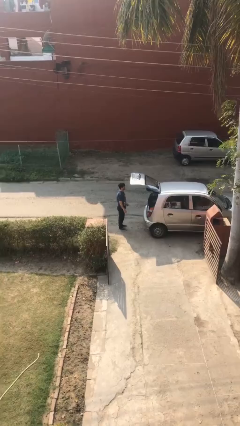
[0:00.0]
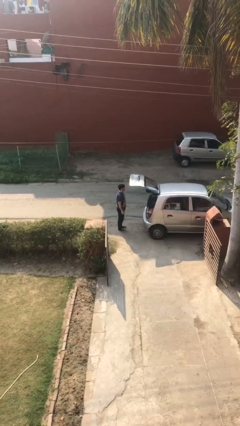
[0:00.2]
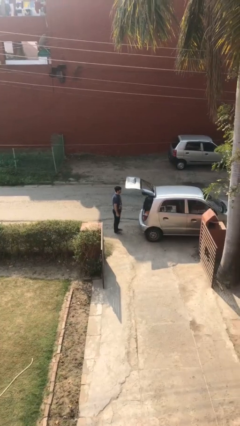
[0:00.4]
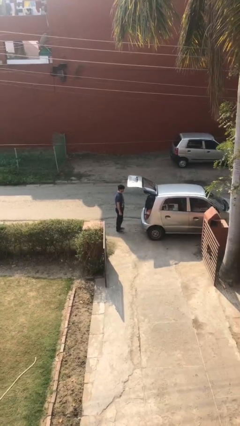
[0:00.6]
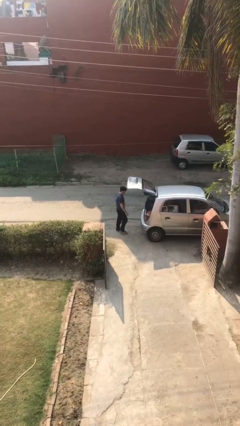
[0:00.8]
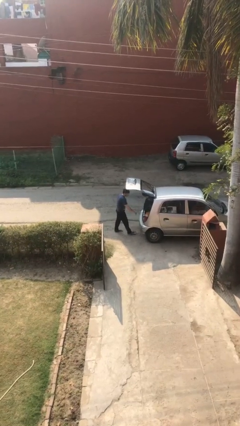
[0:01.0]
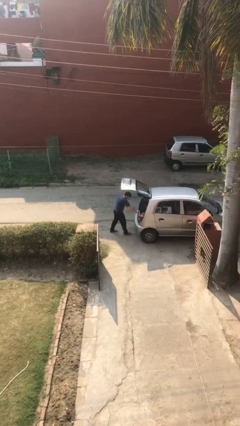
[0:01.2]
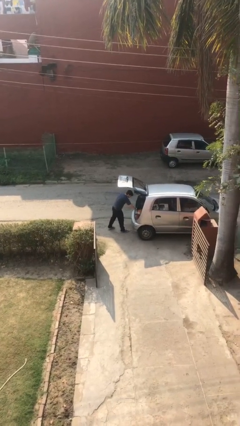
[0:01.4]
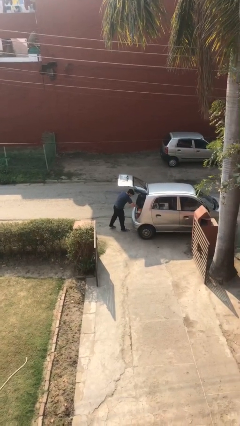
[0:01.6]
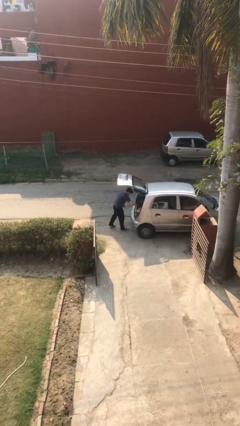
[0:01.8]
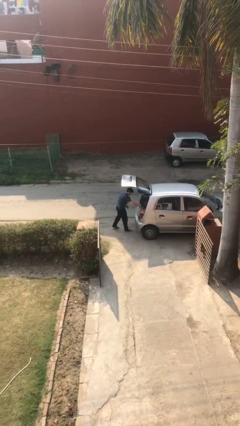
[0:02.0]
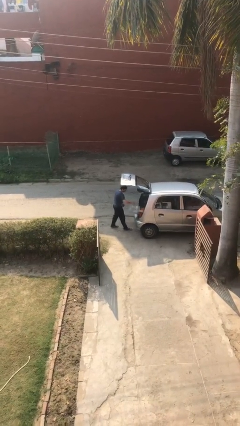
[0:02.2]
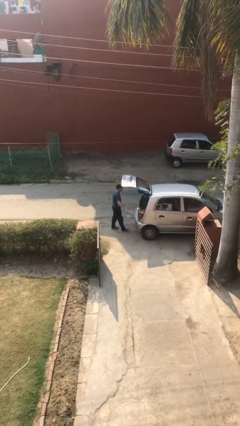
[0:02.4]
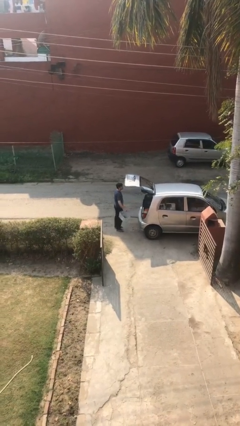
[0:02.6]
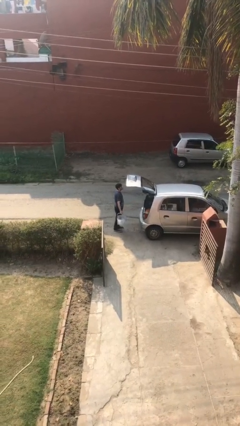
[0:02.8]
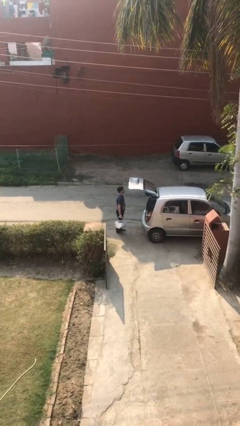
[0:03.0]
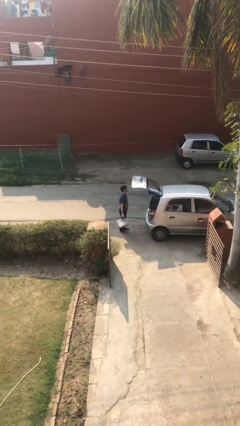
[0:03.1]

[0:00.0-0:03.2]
person unloads car

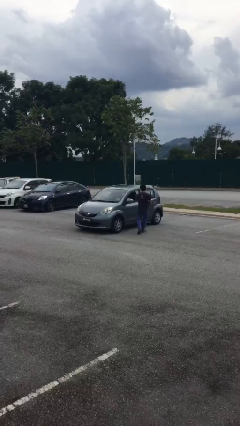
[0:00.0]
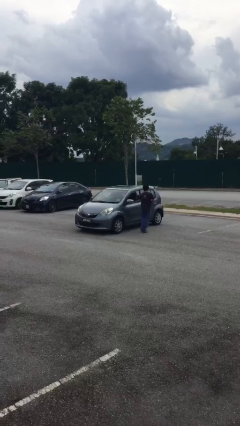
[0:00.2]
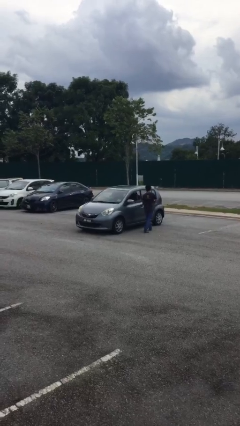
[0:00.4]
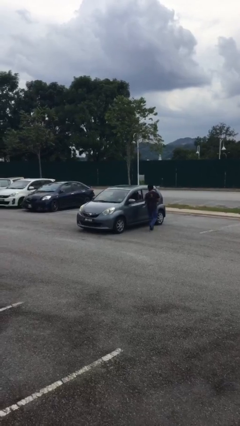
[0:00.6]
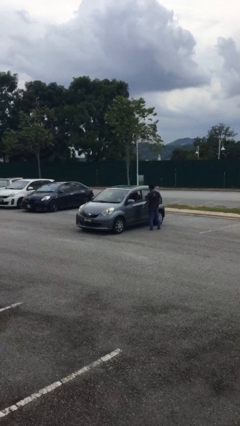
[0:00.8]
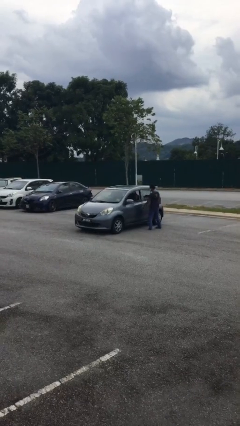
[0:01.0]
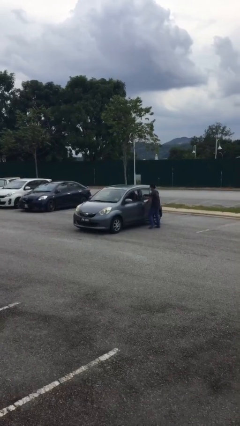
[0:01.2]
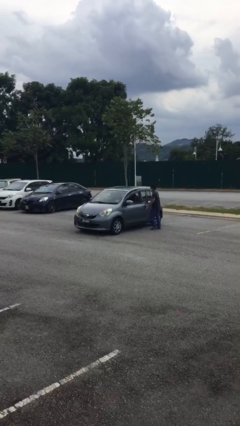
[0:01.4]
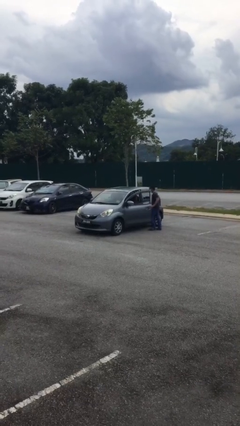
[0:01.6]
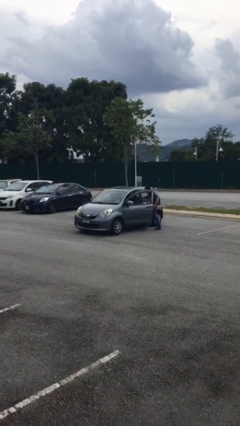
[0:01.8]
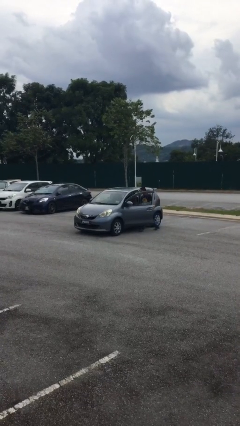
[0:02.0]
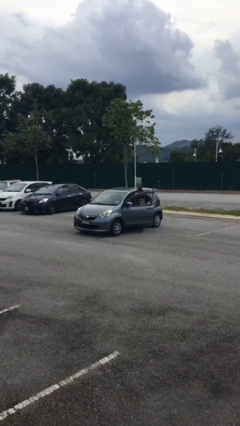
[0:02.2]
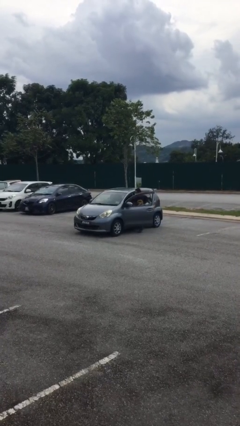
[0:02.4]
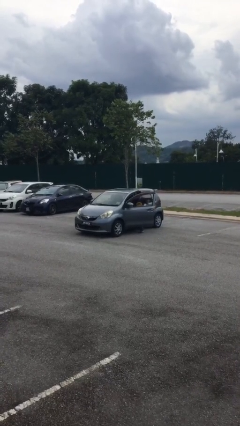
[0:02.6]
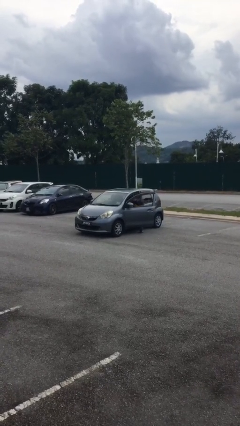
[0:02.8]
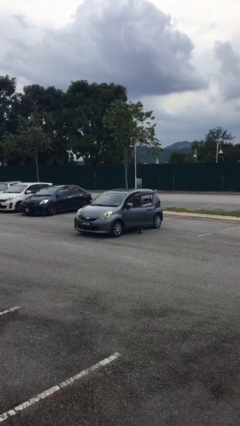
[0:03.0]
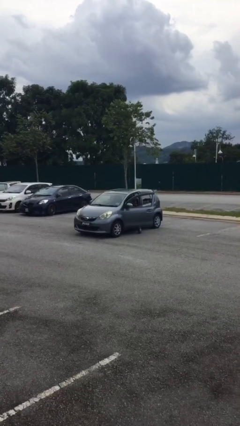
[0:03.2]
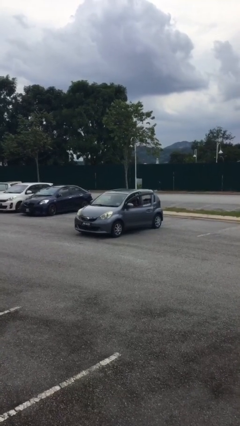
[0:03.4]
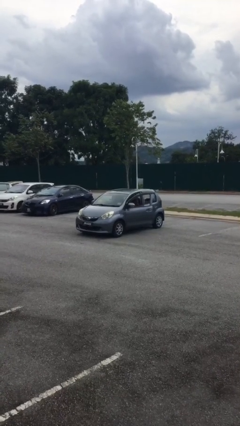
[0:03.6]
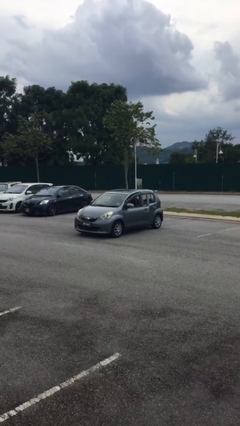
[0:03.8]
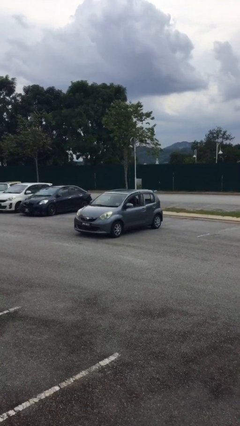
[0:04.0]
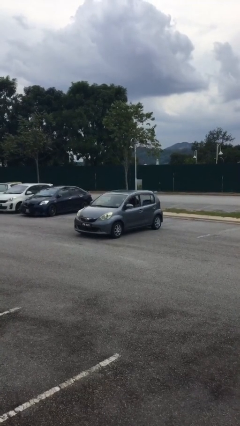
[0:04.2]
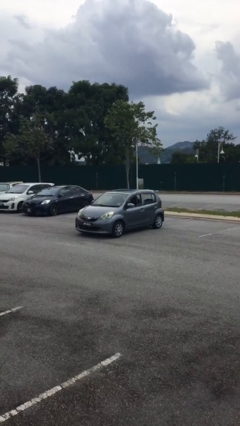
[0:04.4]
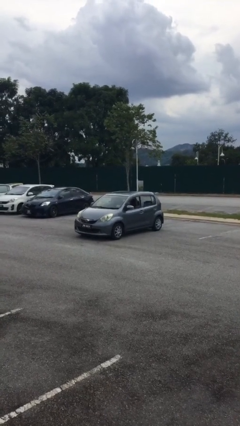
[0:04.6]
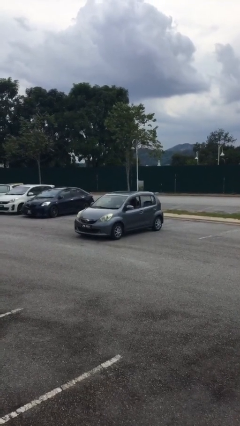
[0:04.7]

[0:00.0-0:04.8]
car picks up person

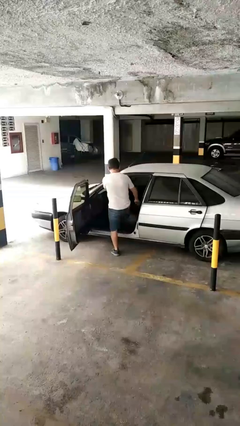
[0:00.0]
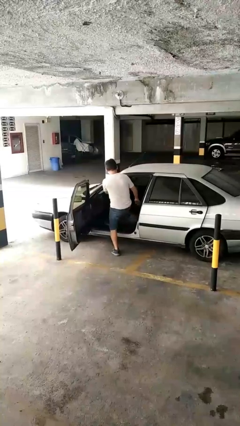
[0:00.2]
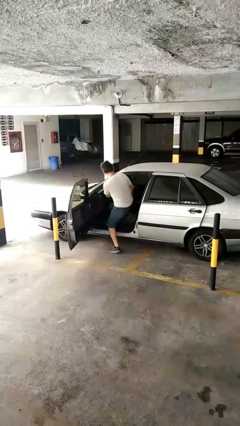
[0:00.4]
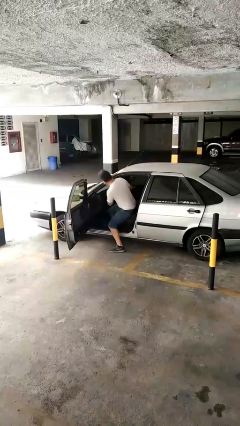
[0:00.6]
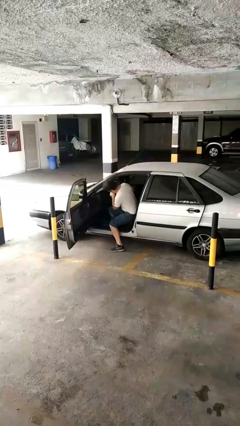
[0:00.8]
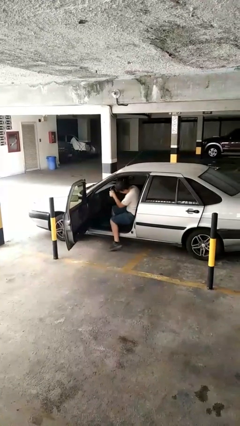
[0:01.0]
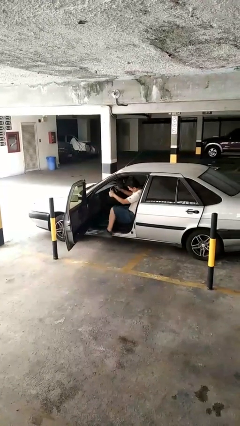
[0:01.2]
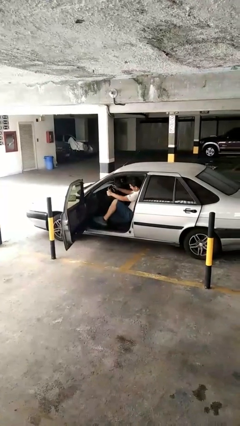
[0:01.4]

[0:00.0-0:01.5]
person enters car

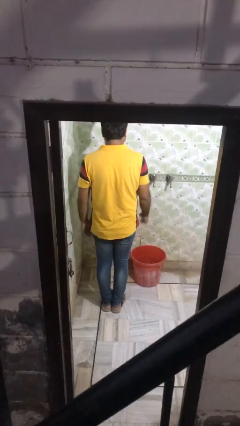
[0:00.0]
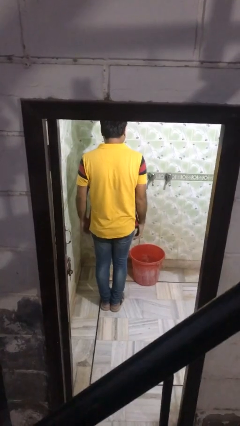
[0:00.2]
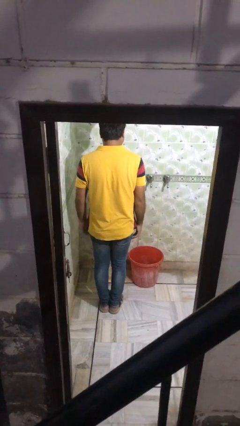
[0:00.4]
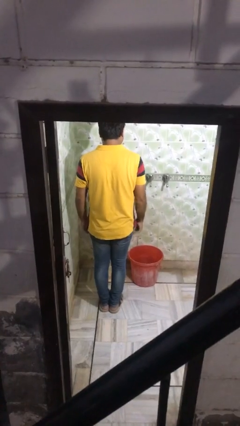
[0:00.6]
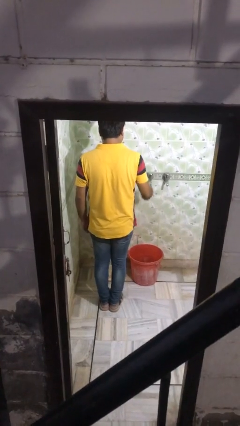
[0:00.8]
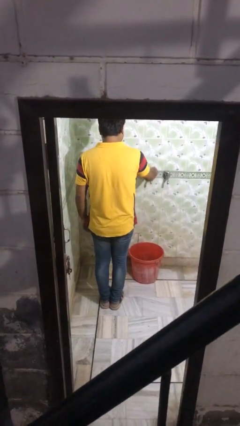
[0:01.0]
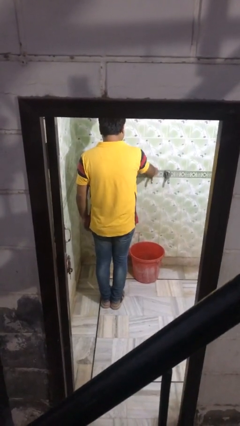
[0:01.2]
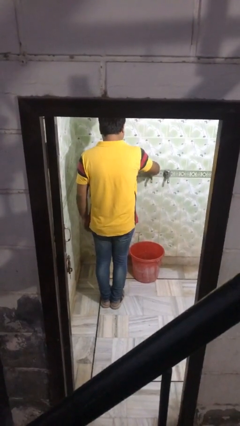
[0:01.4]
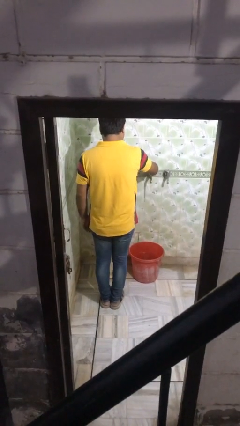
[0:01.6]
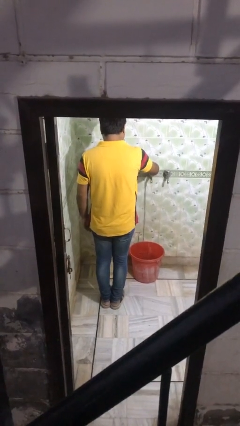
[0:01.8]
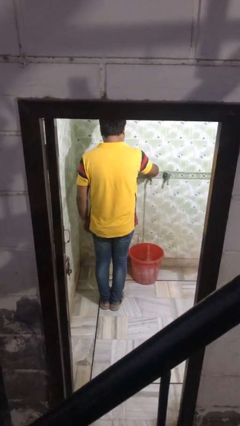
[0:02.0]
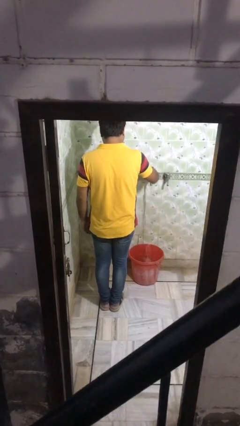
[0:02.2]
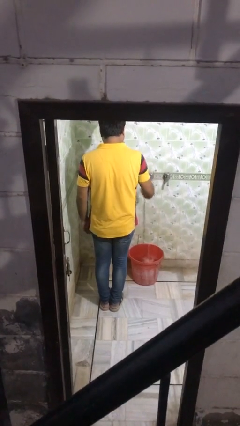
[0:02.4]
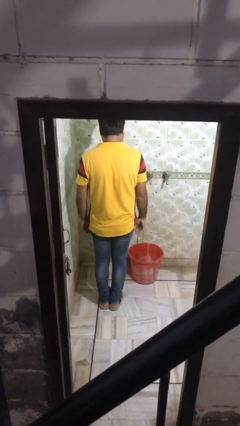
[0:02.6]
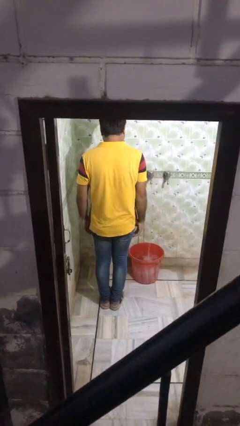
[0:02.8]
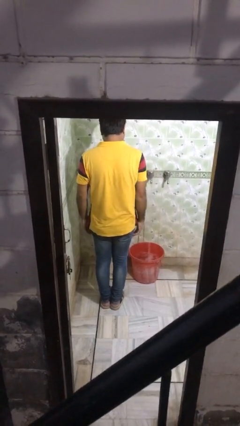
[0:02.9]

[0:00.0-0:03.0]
person turns on faucet

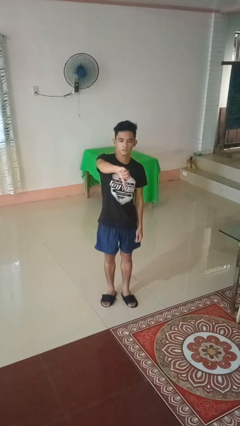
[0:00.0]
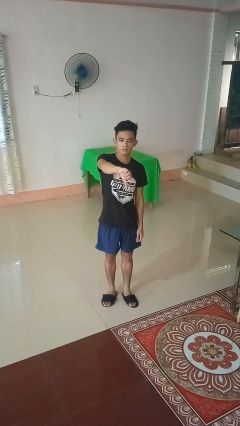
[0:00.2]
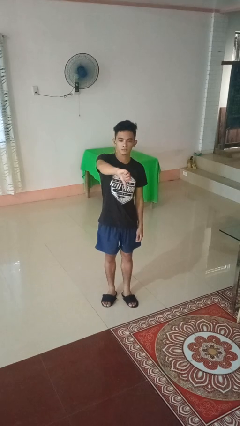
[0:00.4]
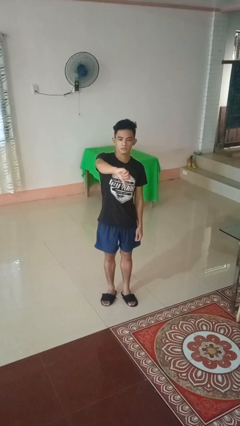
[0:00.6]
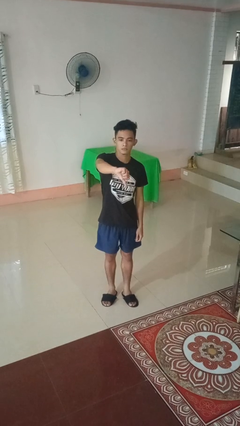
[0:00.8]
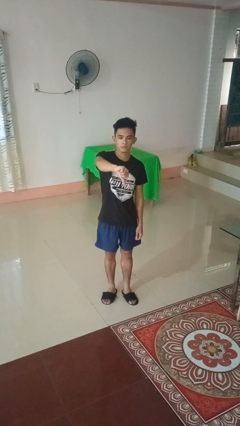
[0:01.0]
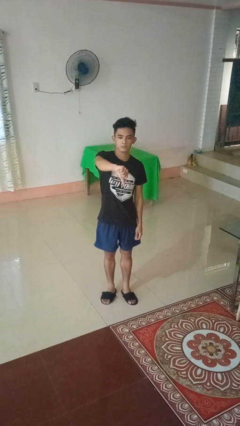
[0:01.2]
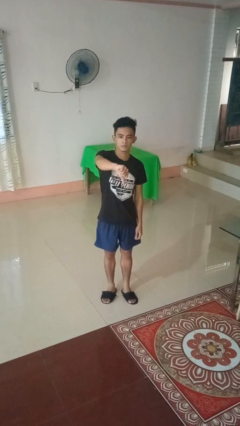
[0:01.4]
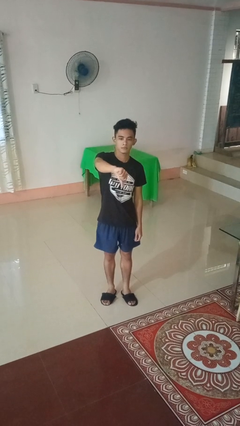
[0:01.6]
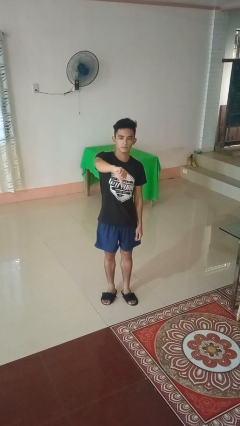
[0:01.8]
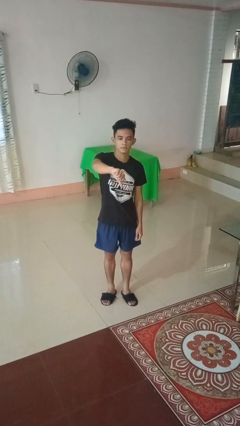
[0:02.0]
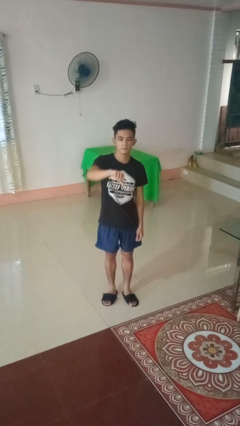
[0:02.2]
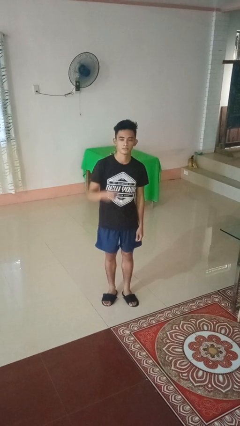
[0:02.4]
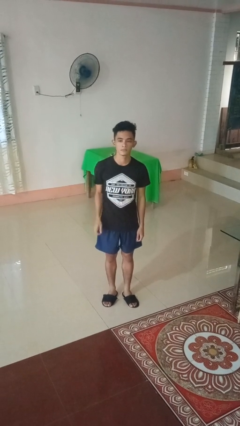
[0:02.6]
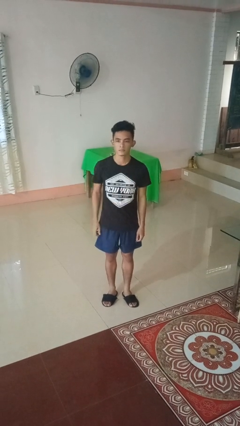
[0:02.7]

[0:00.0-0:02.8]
person gestures thumbs down

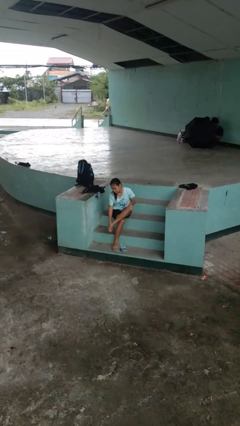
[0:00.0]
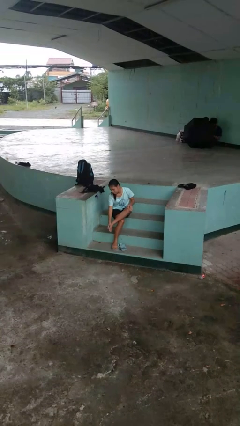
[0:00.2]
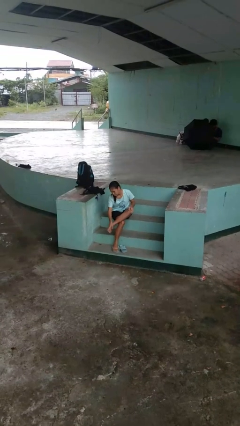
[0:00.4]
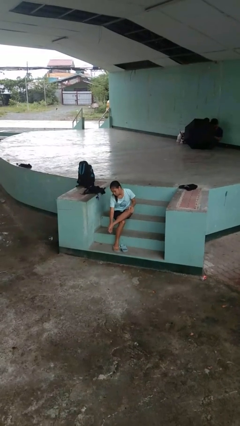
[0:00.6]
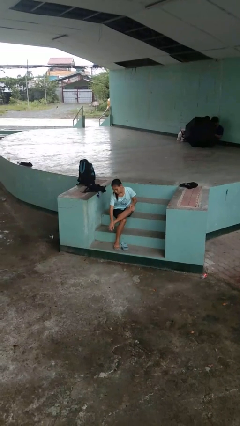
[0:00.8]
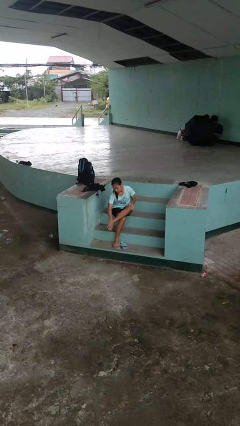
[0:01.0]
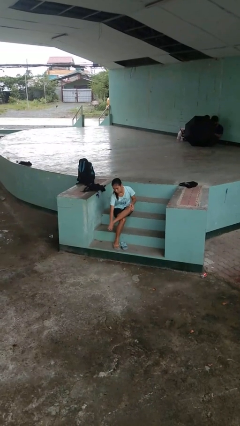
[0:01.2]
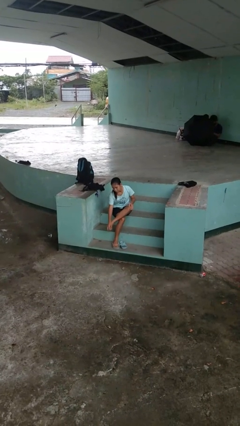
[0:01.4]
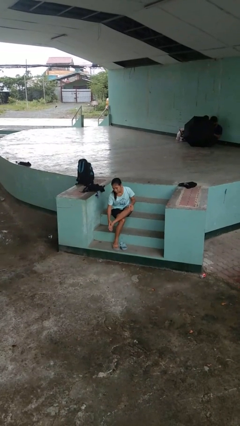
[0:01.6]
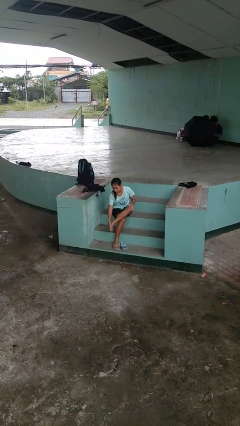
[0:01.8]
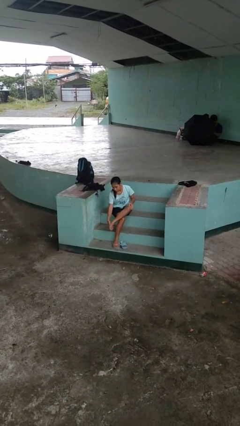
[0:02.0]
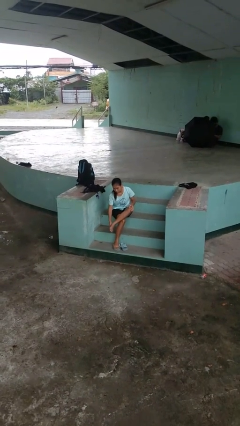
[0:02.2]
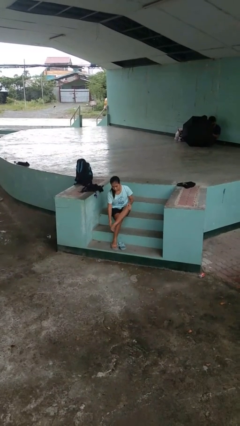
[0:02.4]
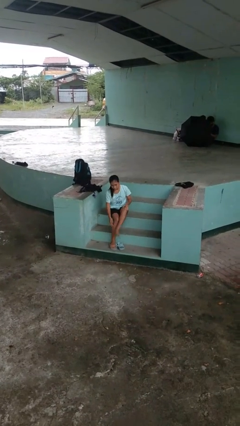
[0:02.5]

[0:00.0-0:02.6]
person rubs foot
